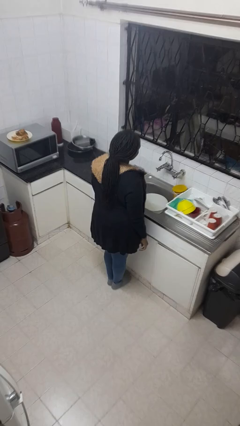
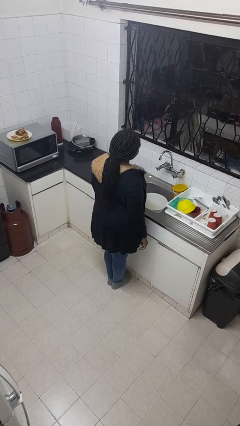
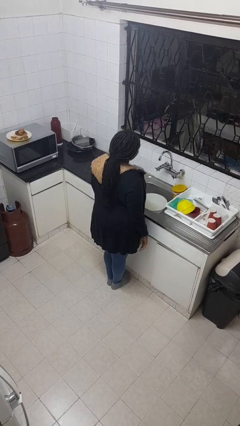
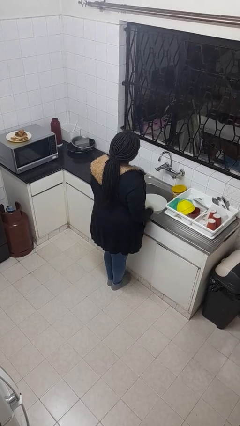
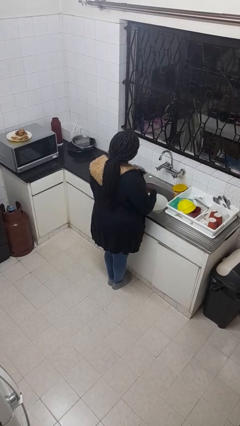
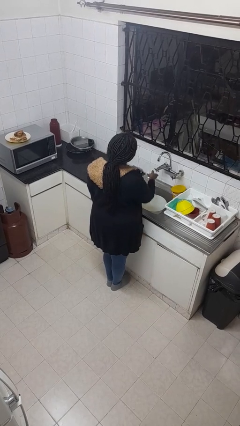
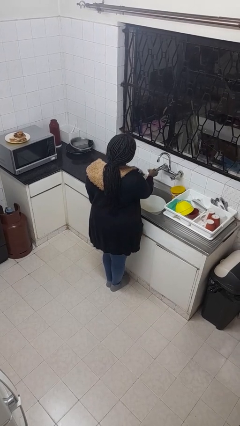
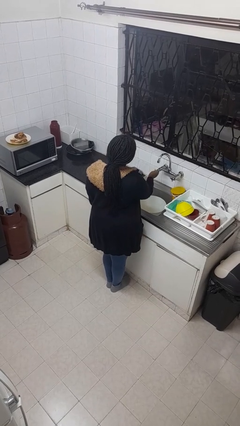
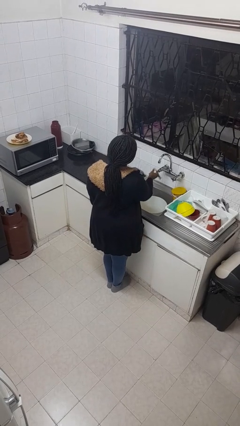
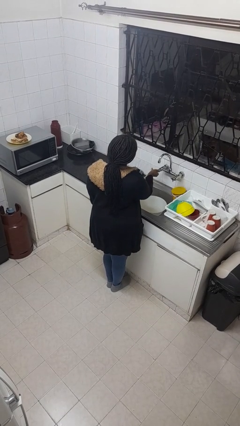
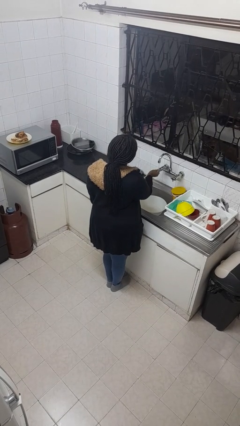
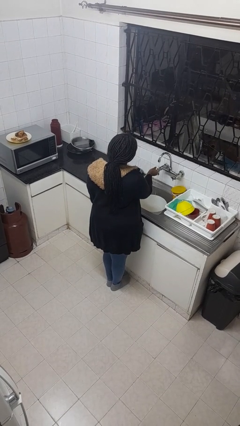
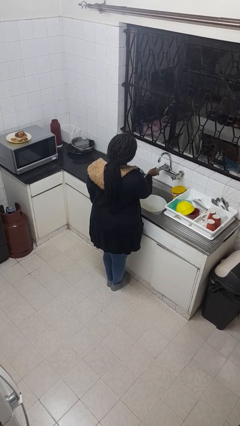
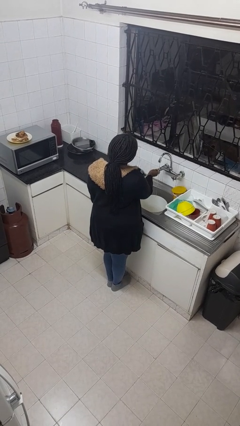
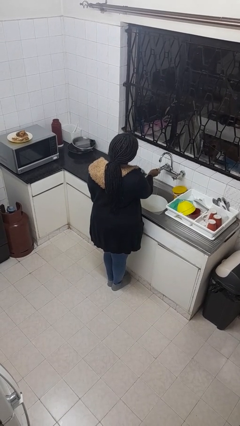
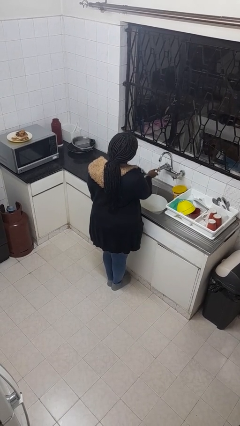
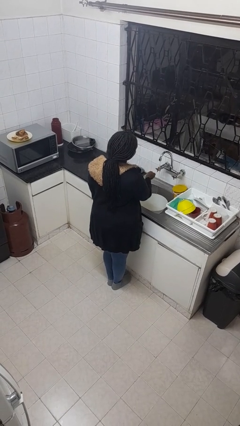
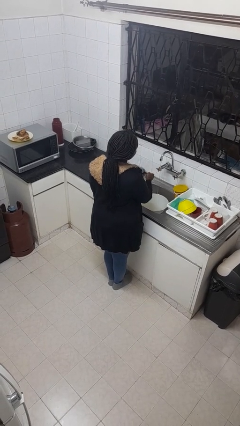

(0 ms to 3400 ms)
person turns on faucet

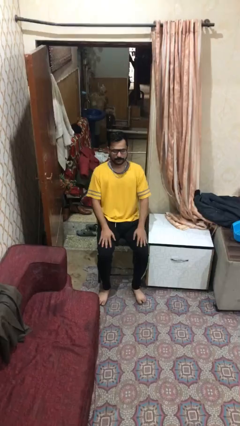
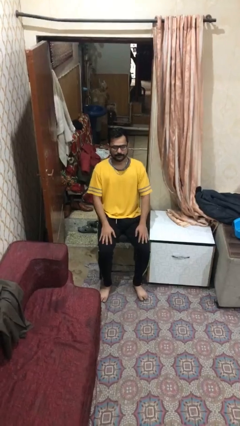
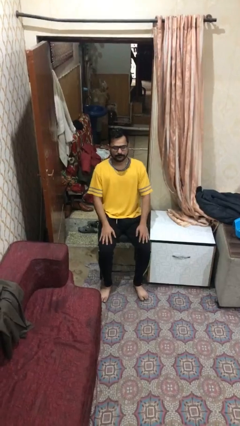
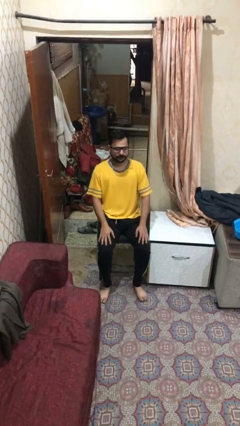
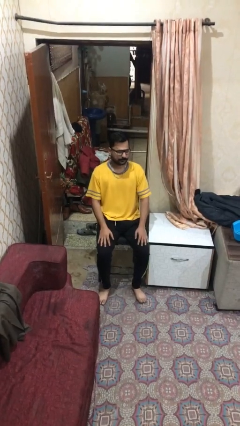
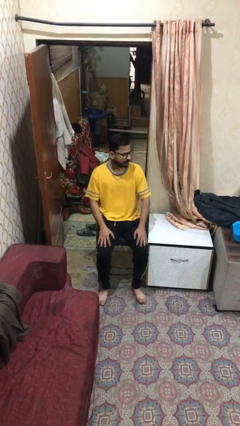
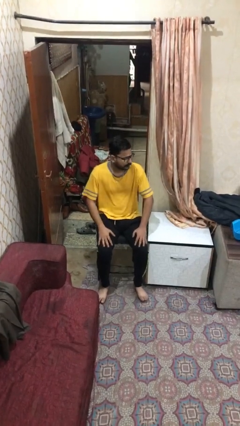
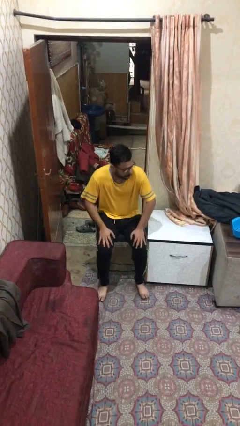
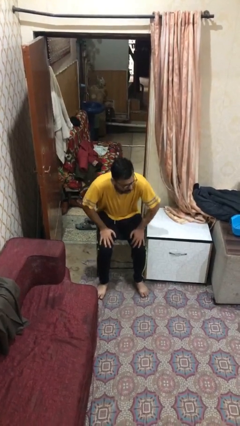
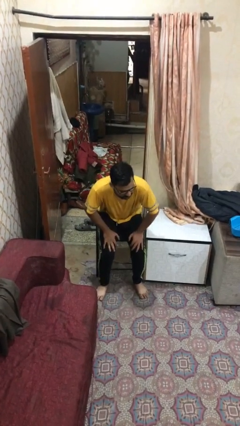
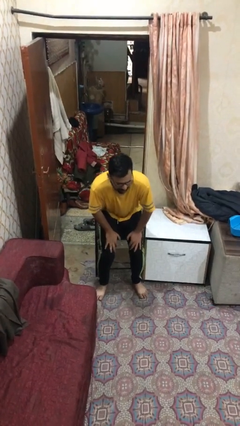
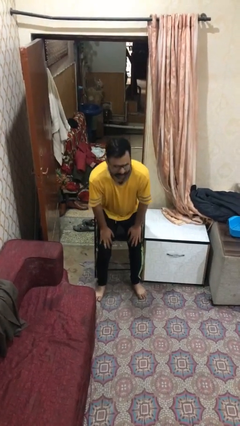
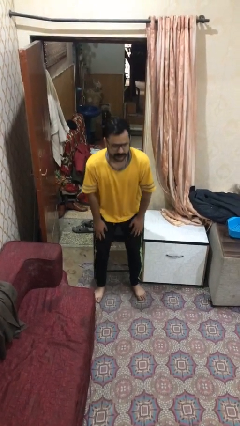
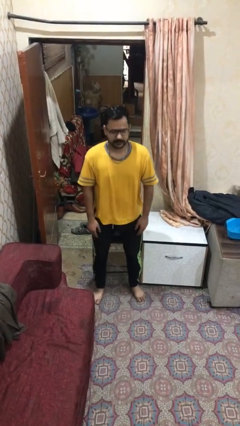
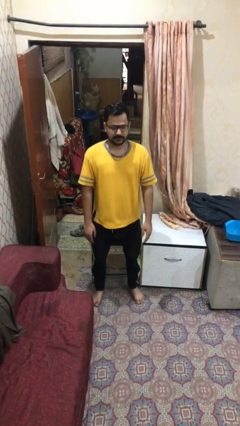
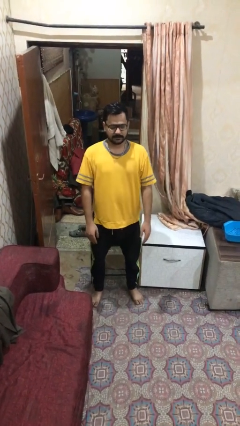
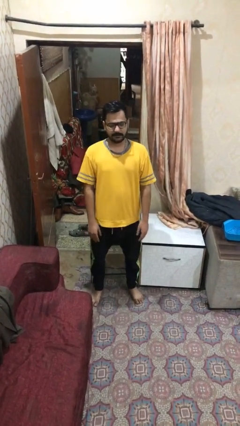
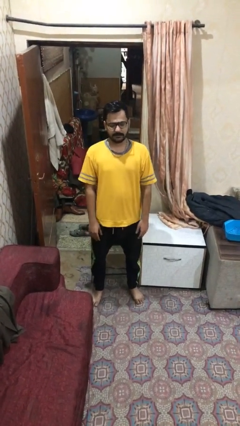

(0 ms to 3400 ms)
person stands up

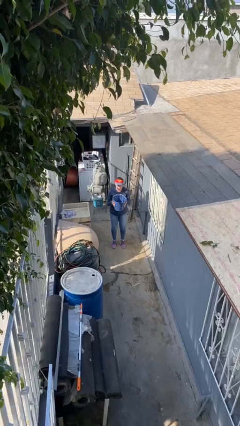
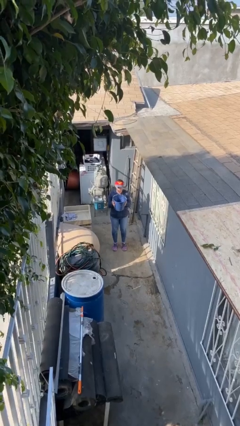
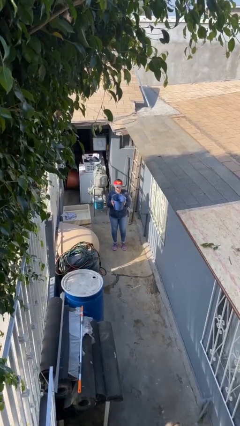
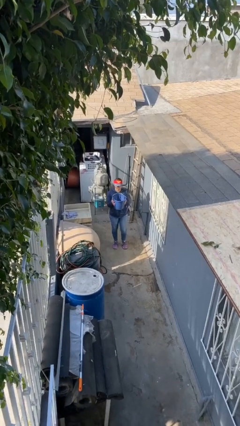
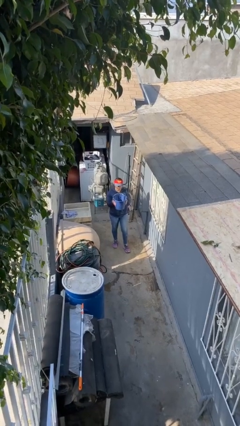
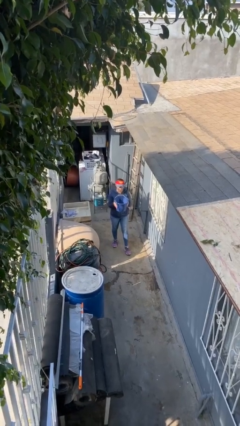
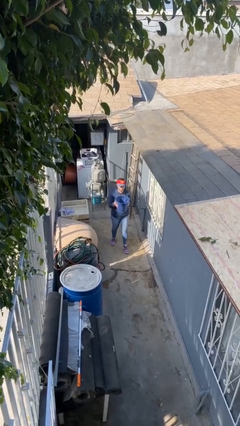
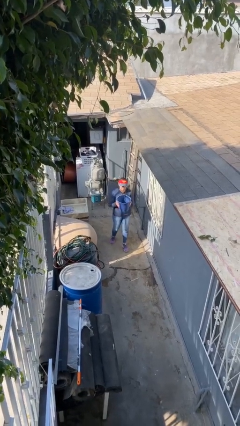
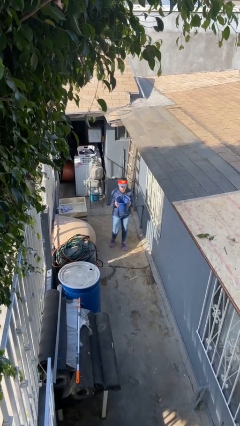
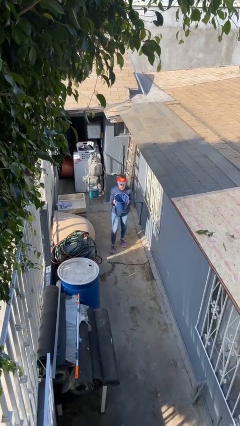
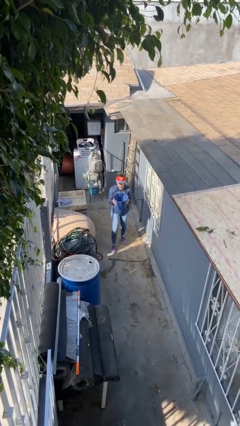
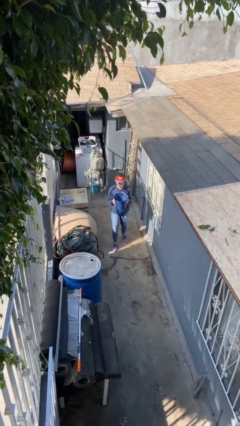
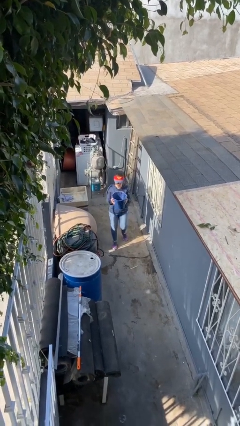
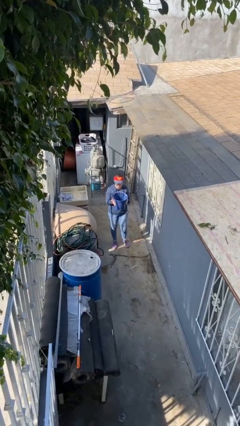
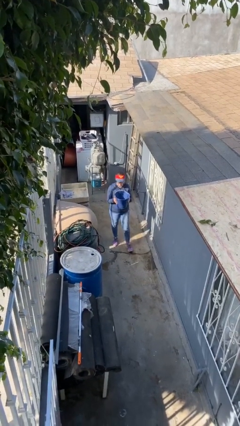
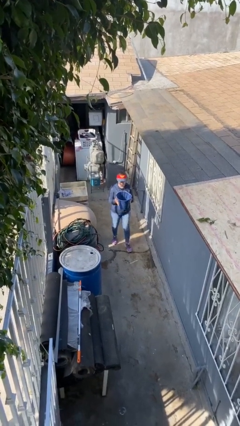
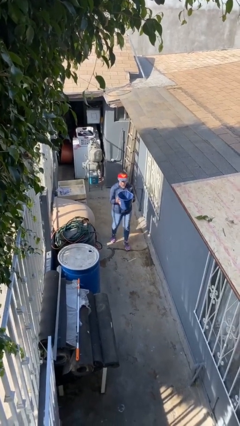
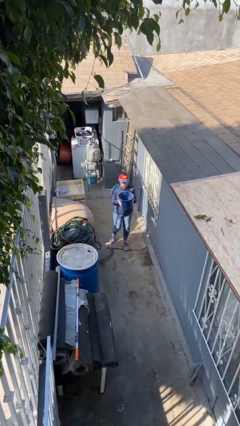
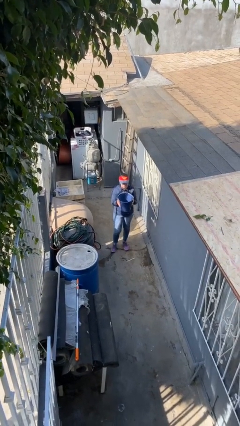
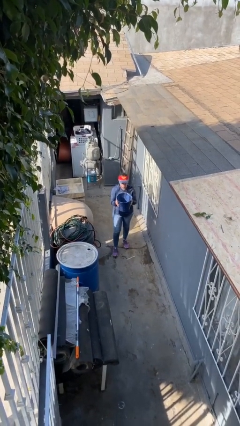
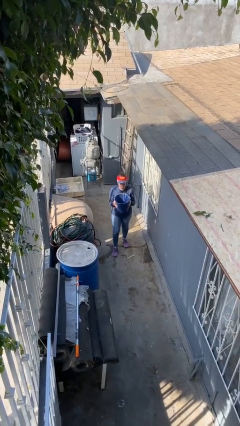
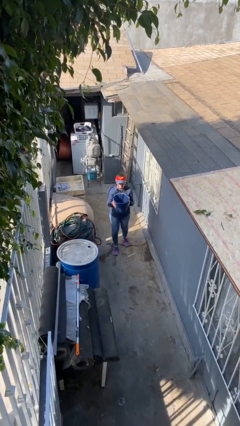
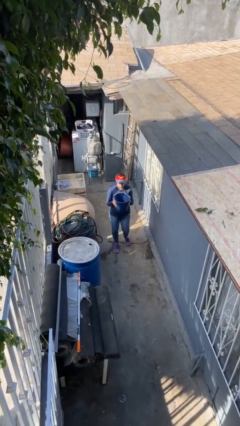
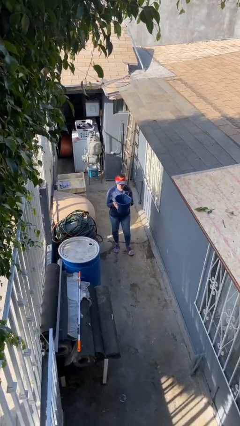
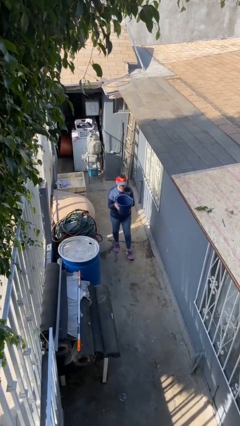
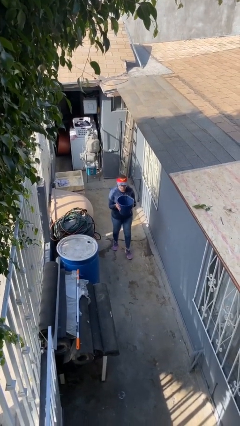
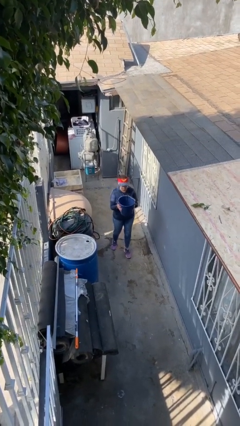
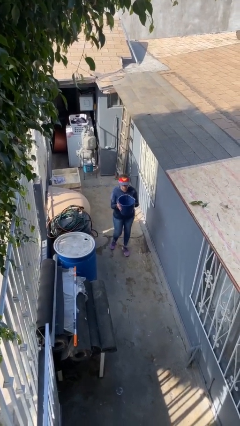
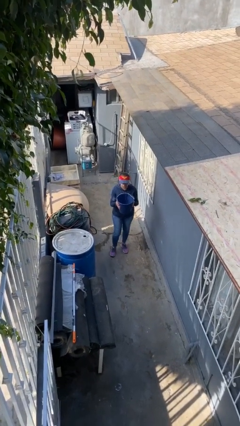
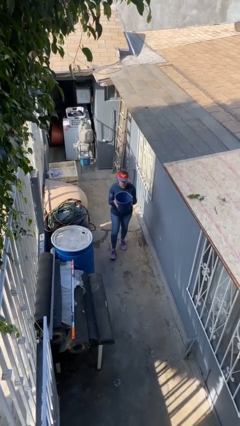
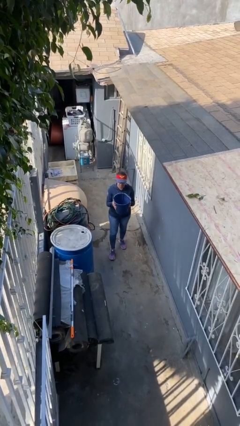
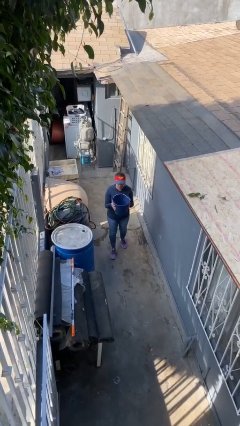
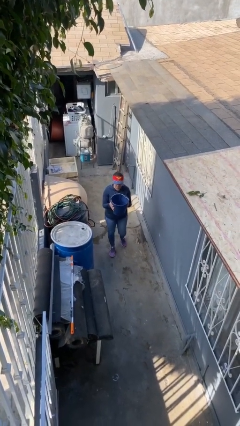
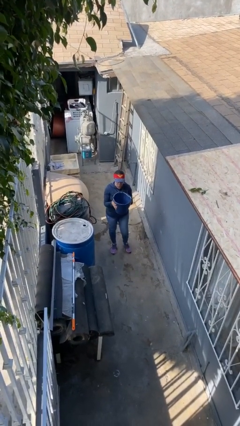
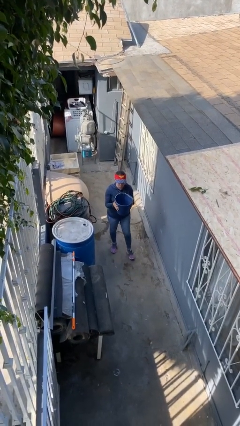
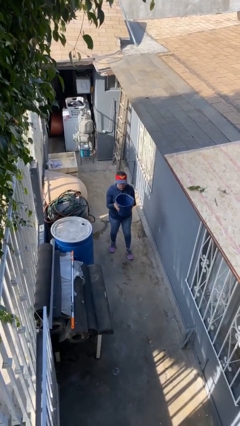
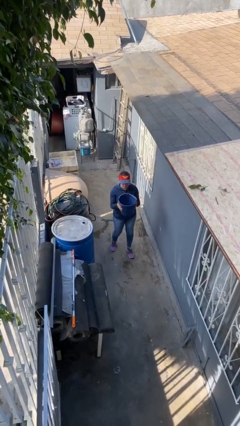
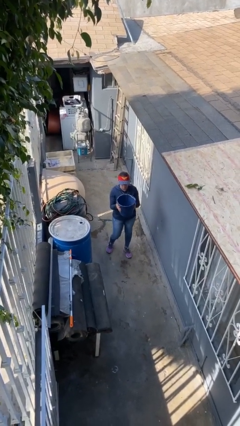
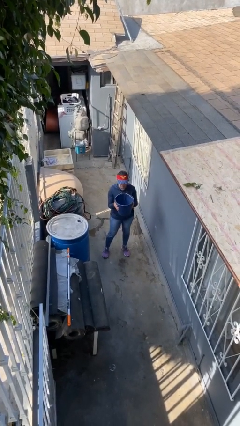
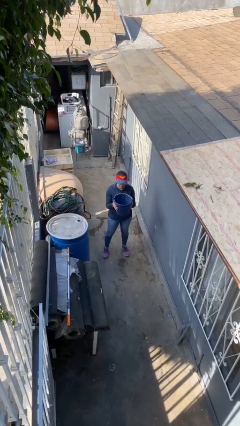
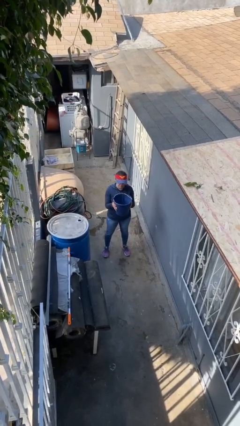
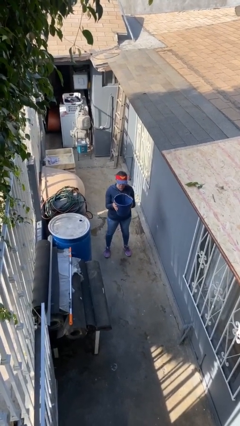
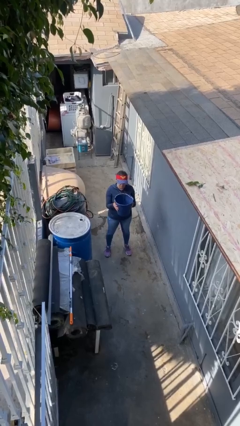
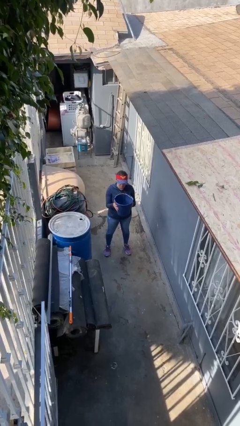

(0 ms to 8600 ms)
person carries heavy object

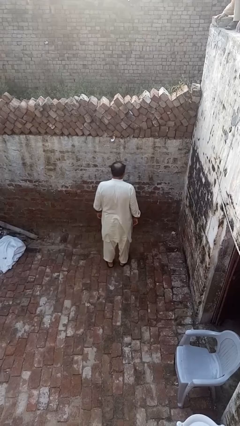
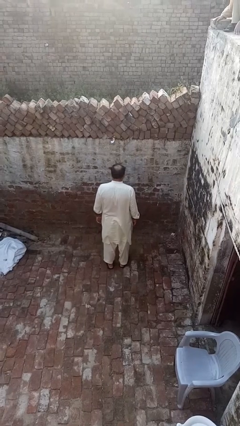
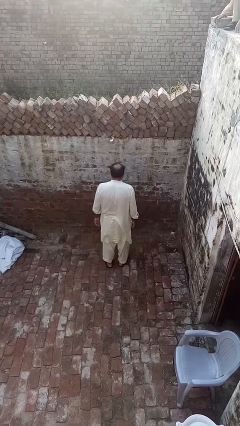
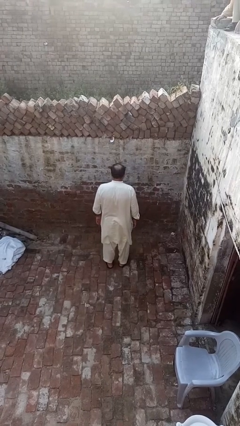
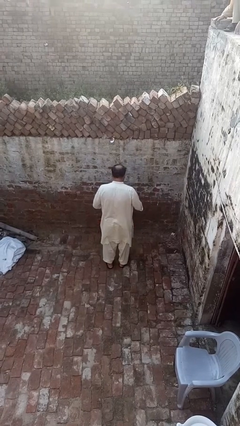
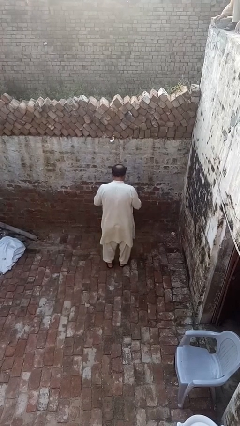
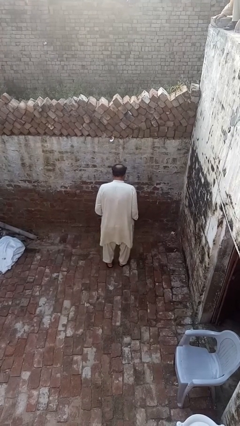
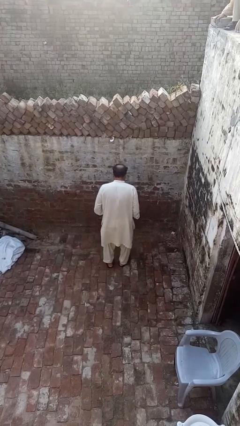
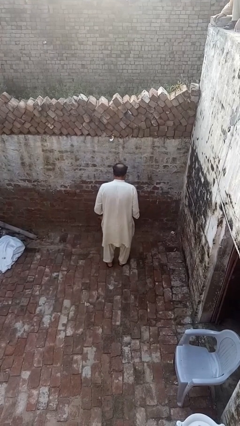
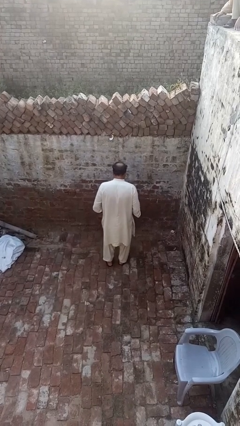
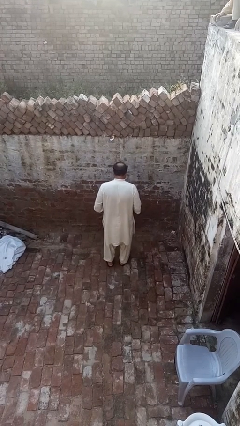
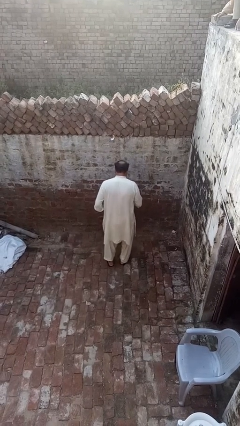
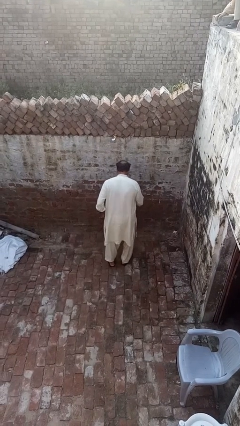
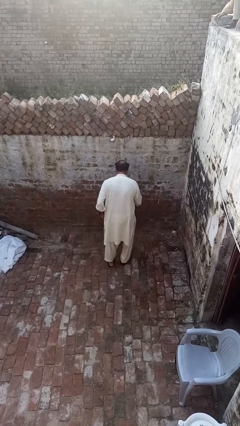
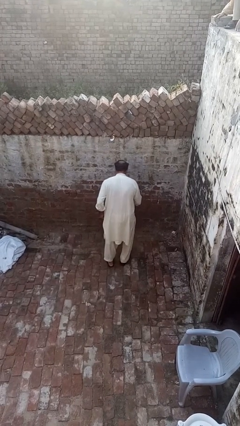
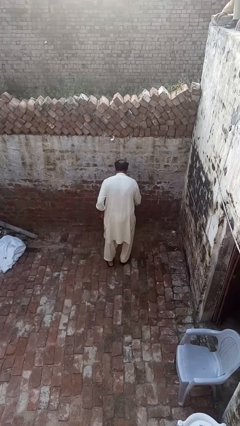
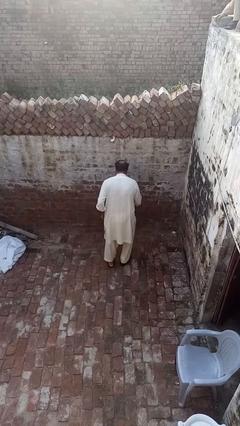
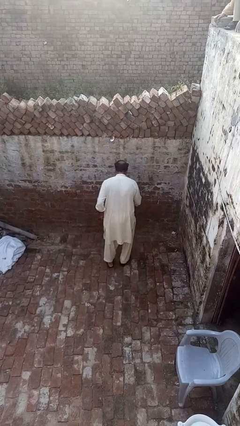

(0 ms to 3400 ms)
person slaps hands on thighs
